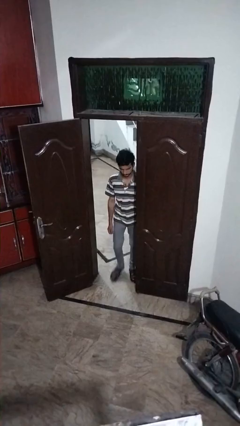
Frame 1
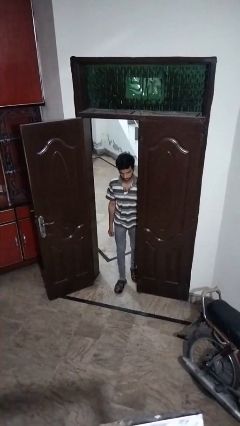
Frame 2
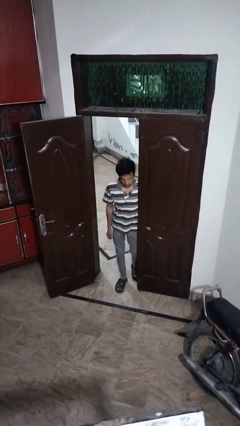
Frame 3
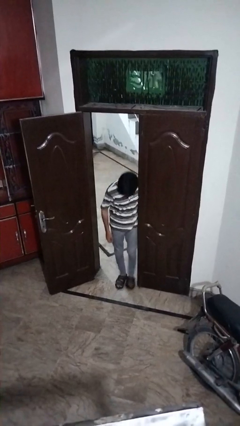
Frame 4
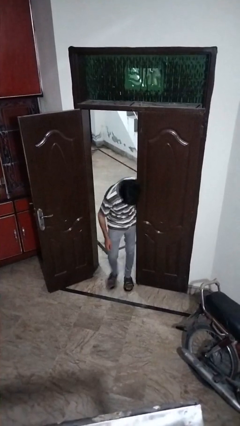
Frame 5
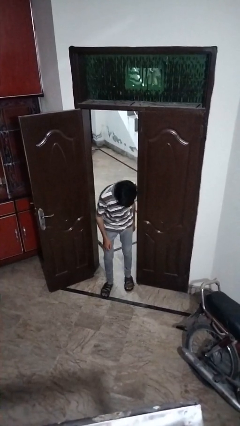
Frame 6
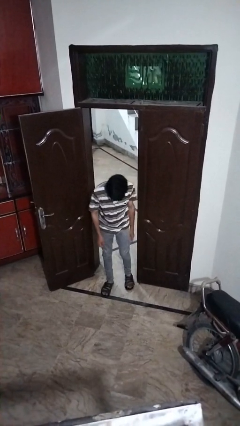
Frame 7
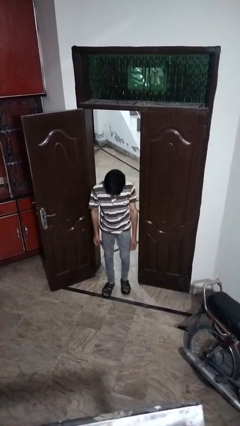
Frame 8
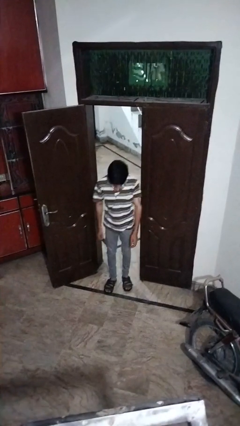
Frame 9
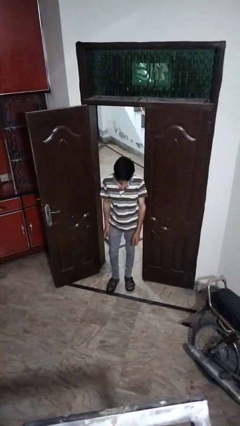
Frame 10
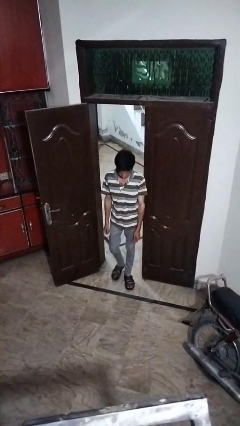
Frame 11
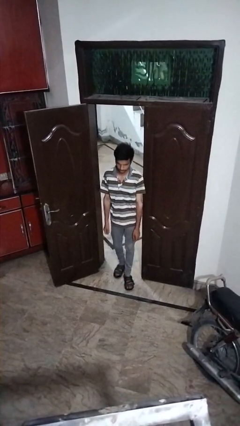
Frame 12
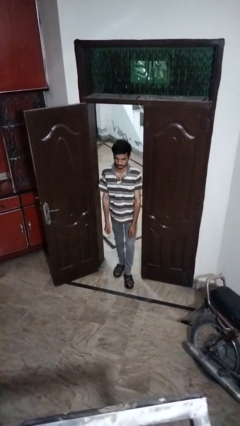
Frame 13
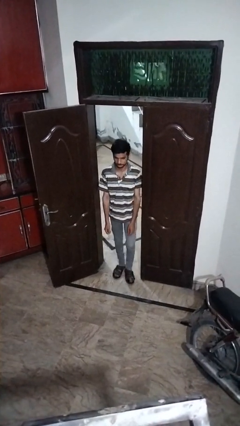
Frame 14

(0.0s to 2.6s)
person bumps into wall

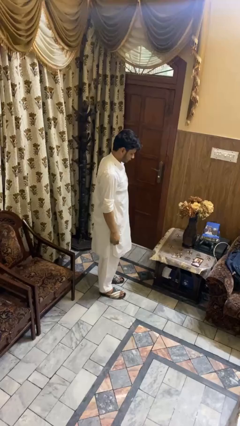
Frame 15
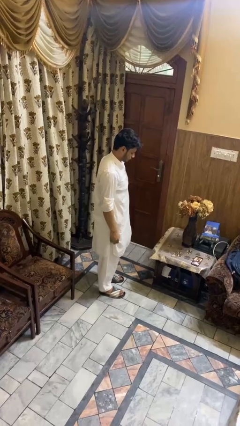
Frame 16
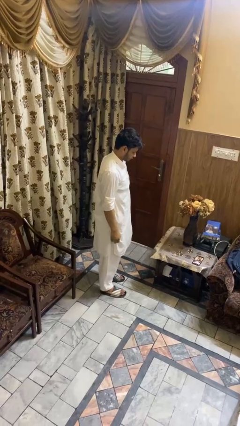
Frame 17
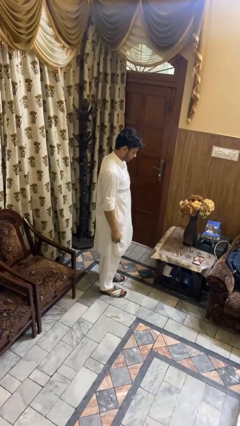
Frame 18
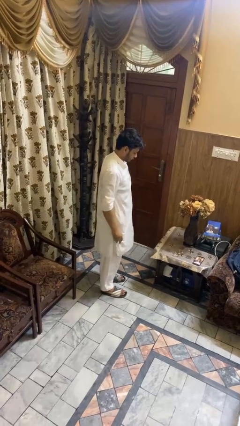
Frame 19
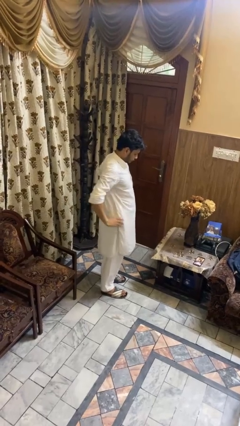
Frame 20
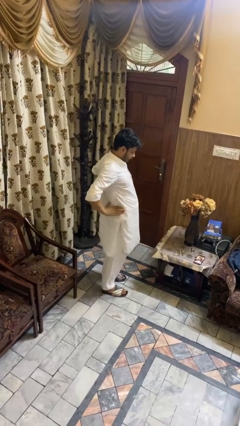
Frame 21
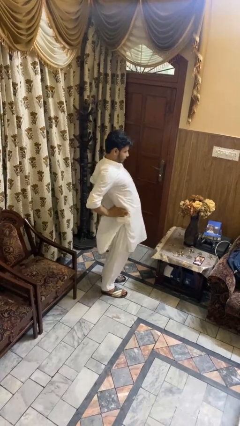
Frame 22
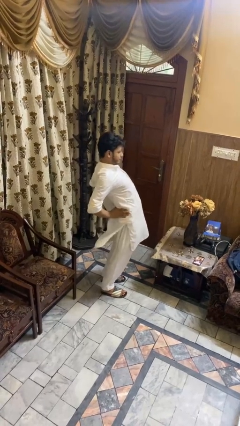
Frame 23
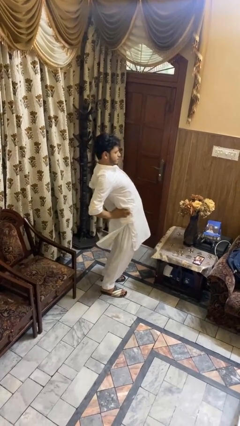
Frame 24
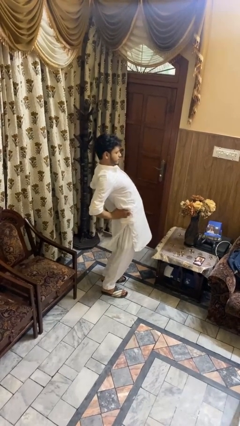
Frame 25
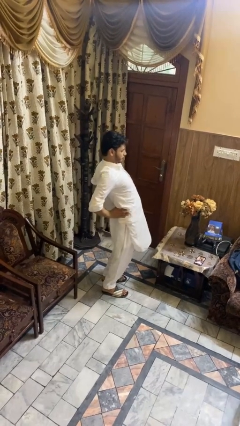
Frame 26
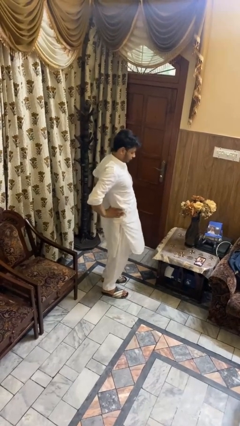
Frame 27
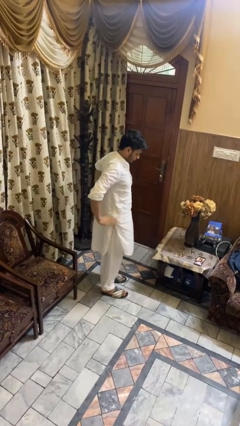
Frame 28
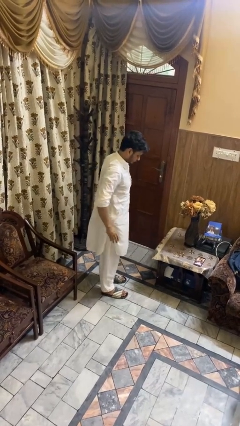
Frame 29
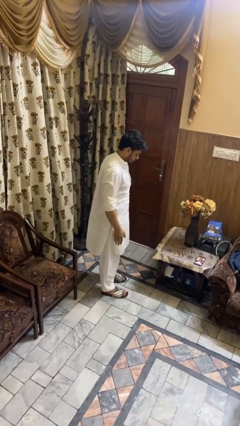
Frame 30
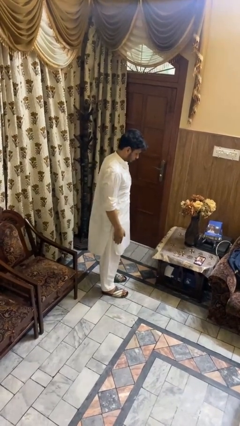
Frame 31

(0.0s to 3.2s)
person stretches back

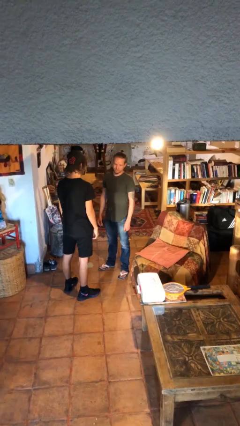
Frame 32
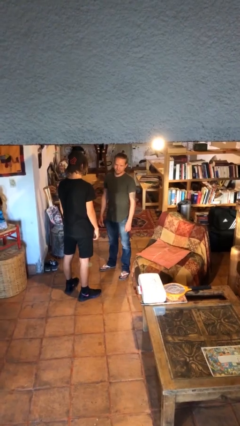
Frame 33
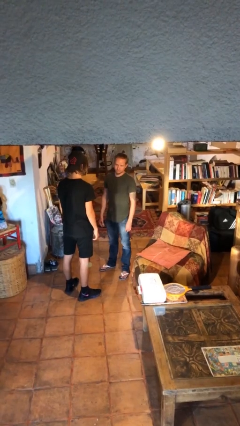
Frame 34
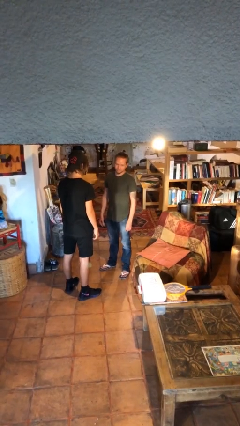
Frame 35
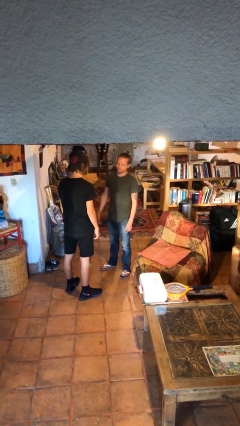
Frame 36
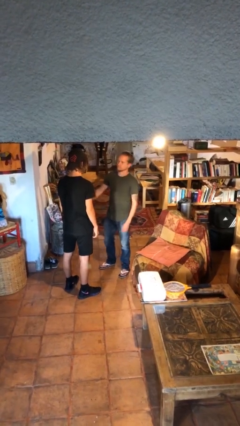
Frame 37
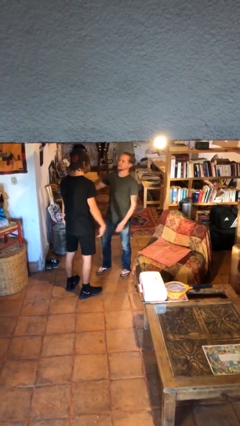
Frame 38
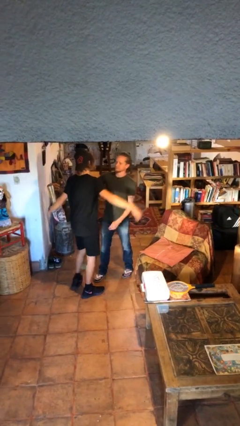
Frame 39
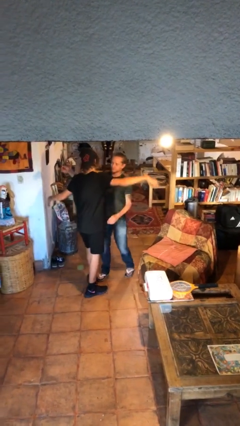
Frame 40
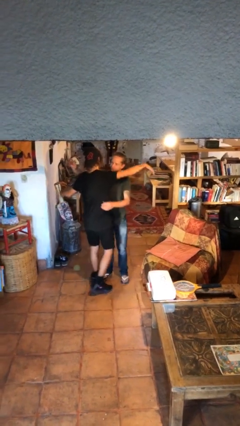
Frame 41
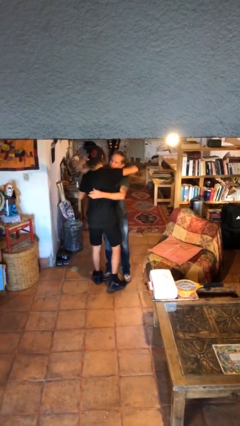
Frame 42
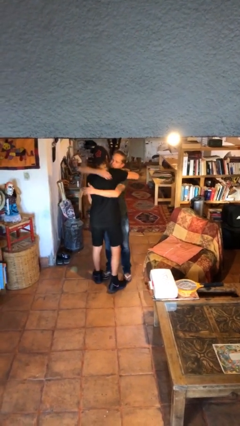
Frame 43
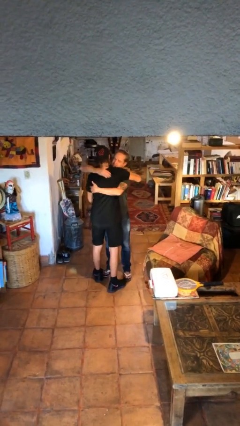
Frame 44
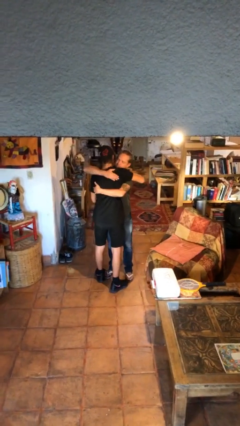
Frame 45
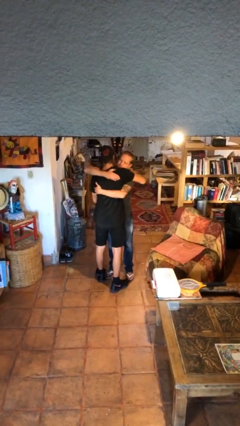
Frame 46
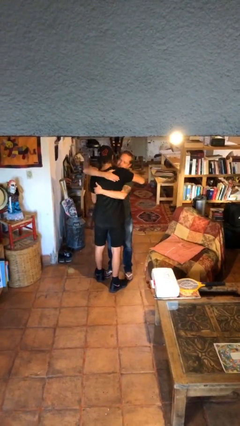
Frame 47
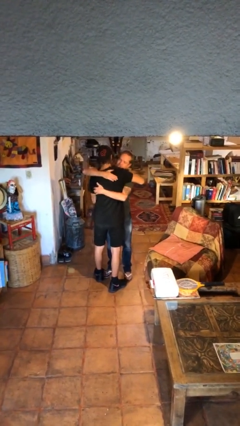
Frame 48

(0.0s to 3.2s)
person embraces person

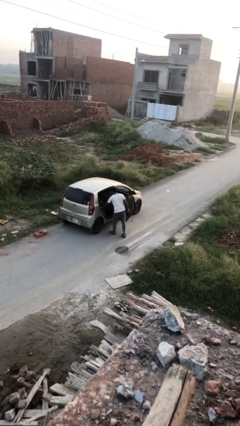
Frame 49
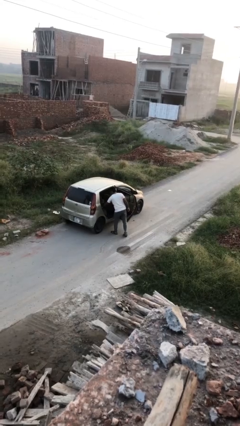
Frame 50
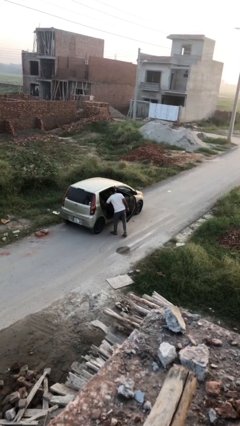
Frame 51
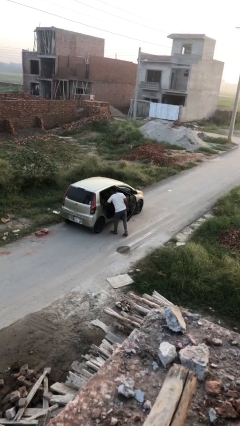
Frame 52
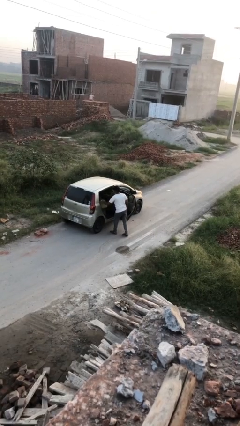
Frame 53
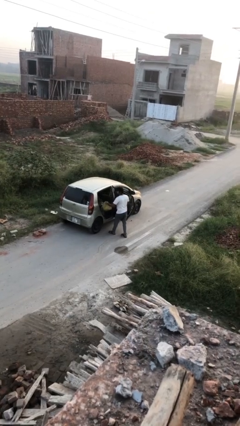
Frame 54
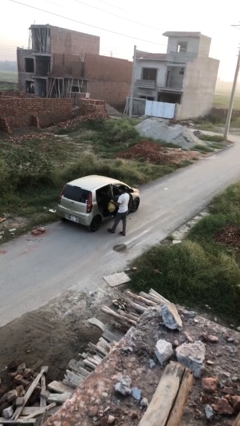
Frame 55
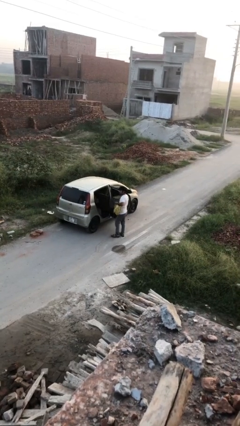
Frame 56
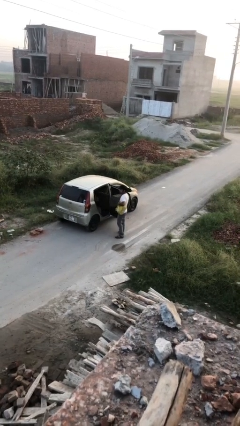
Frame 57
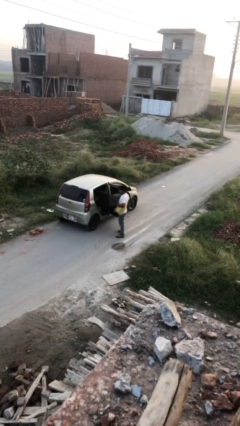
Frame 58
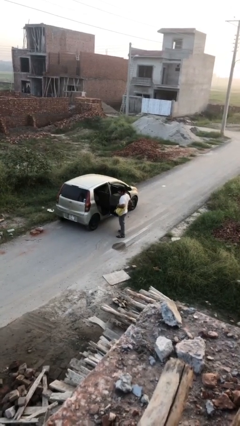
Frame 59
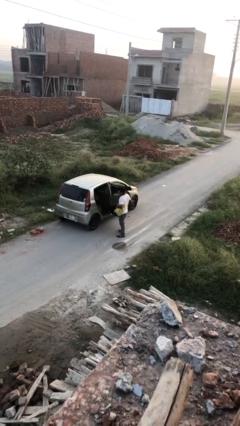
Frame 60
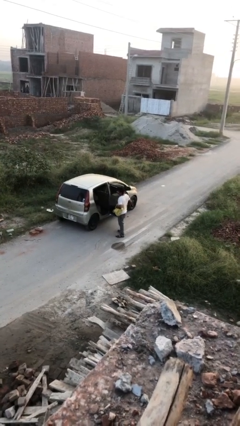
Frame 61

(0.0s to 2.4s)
person unloads car

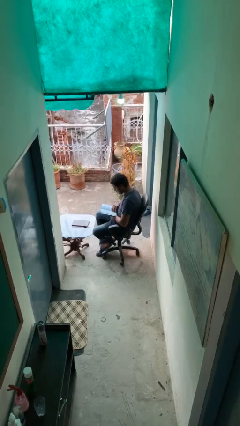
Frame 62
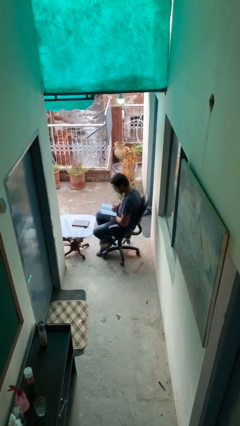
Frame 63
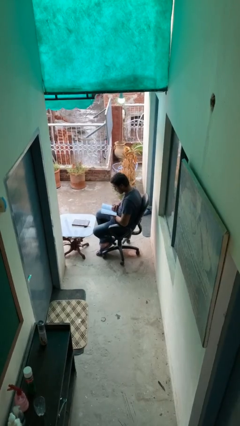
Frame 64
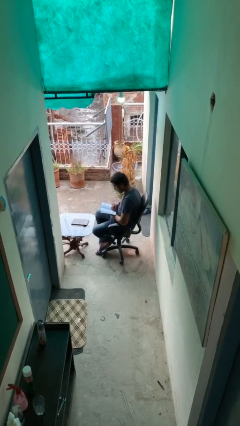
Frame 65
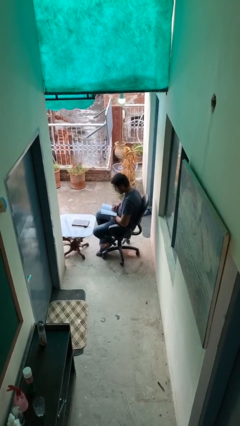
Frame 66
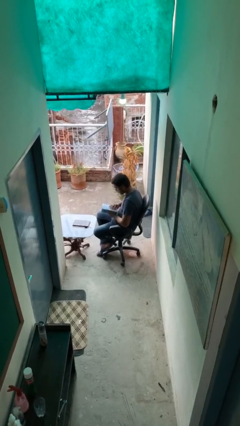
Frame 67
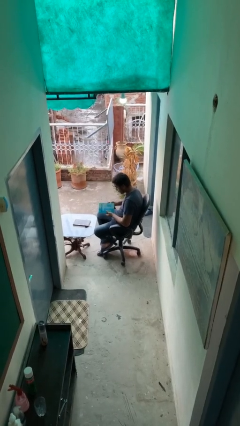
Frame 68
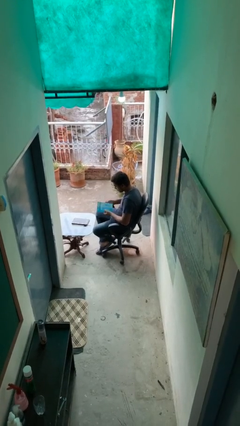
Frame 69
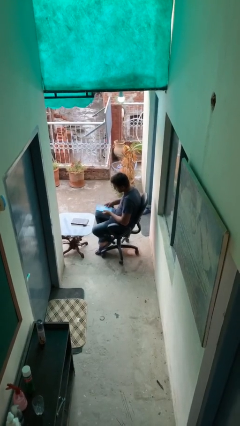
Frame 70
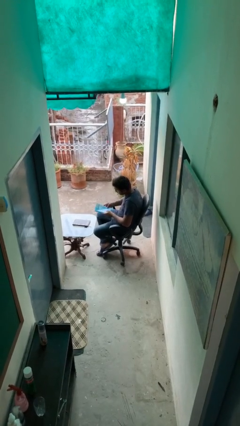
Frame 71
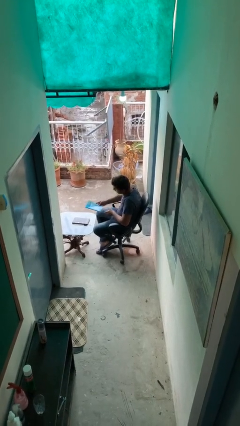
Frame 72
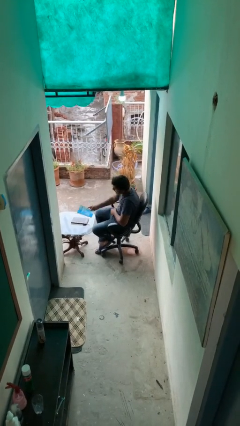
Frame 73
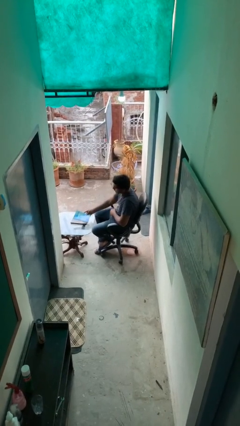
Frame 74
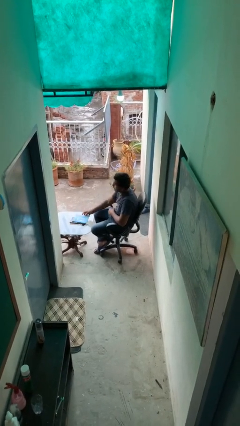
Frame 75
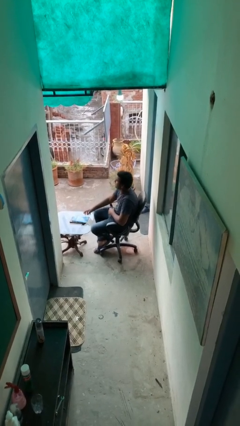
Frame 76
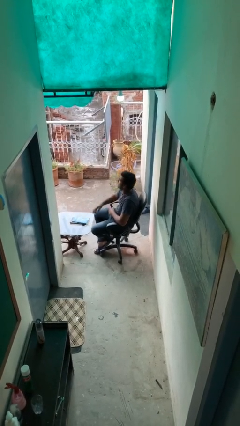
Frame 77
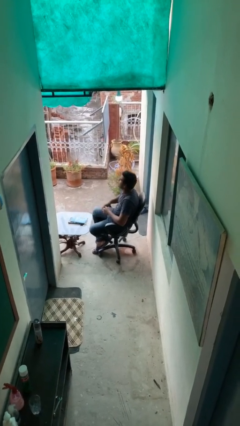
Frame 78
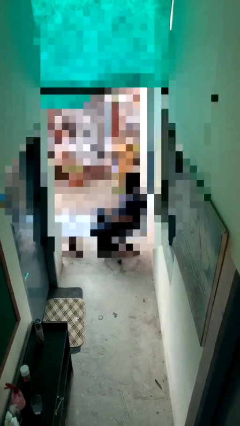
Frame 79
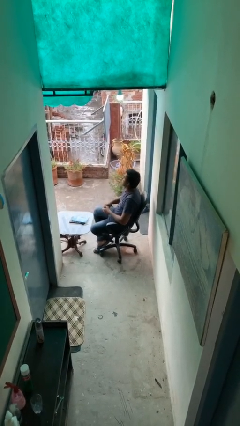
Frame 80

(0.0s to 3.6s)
person puts down object on table

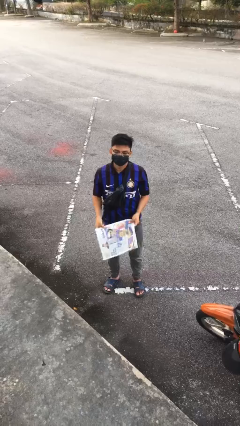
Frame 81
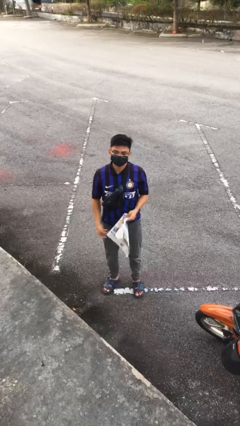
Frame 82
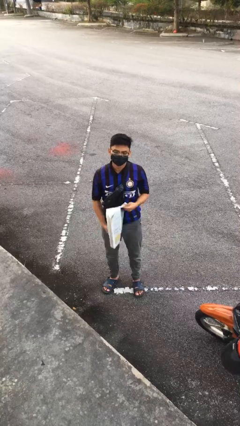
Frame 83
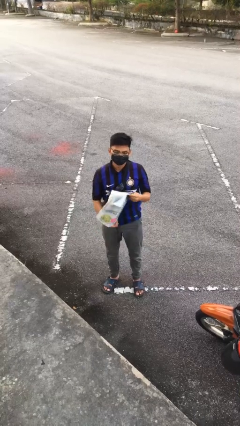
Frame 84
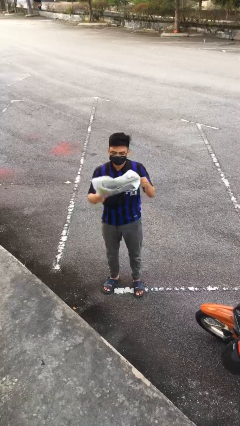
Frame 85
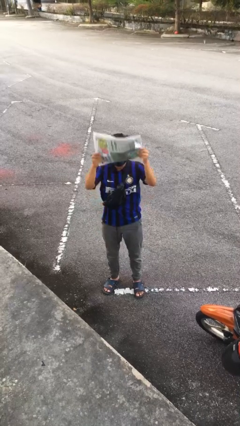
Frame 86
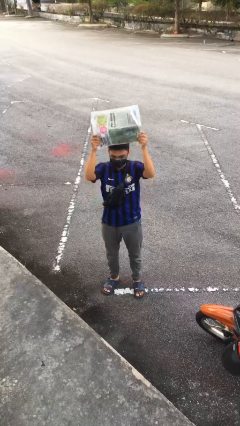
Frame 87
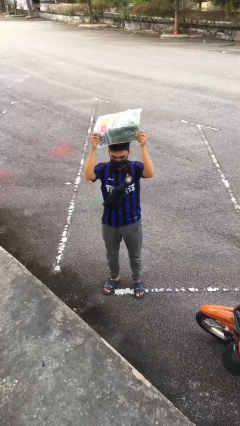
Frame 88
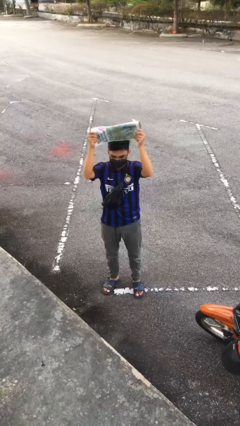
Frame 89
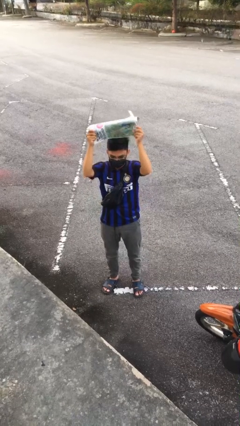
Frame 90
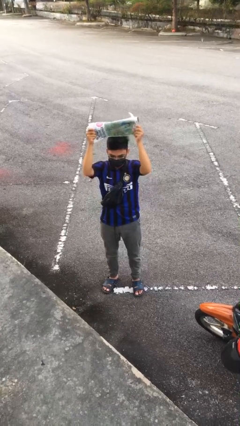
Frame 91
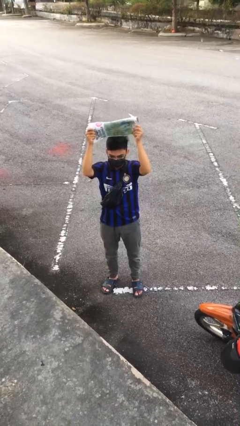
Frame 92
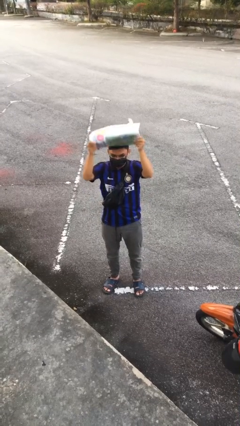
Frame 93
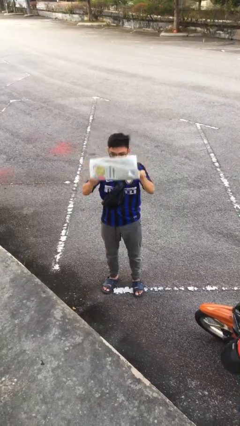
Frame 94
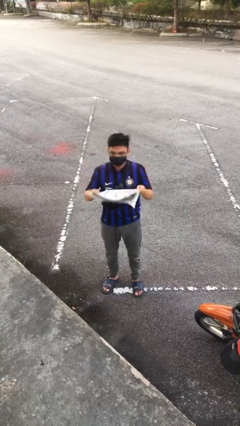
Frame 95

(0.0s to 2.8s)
person holds object above head
